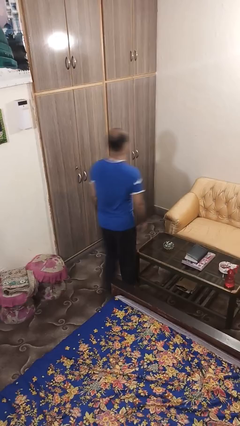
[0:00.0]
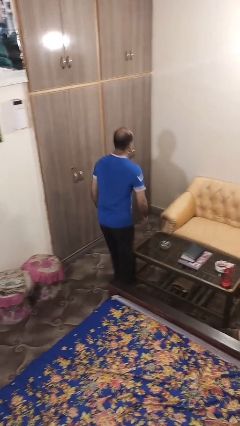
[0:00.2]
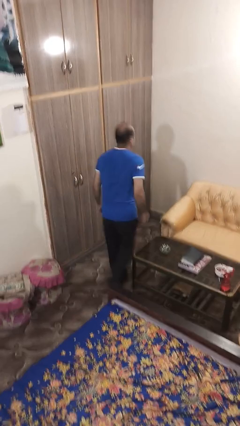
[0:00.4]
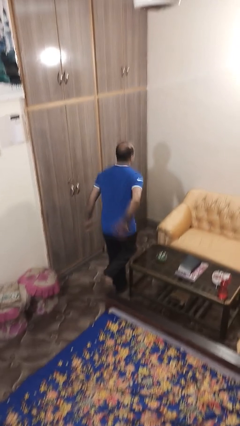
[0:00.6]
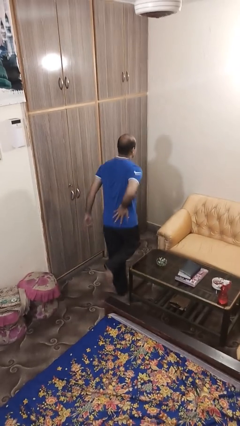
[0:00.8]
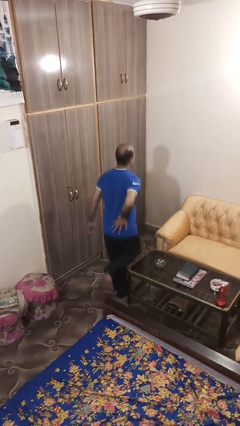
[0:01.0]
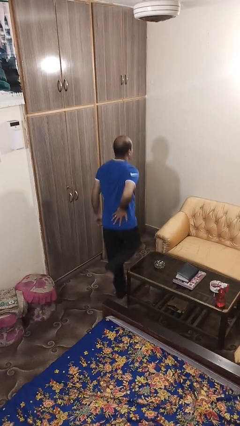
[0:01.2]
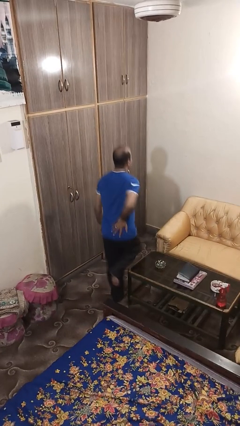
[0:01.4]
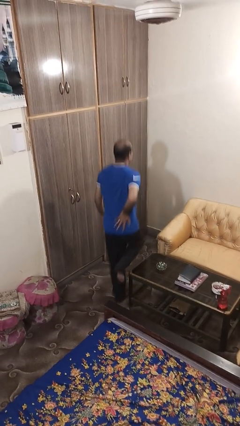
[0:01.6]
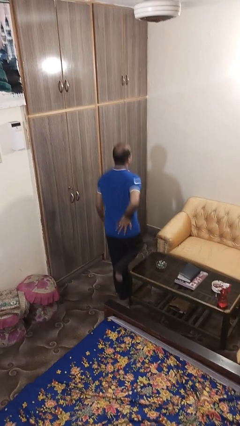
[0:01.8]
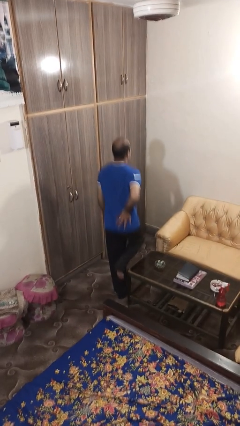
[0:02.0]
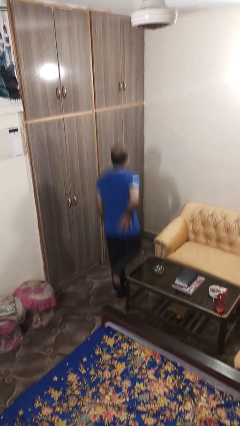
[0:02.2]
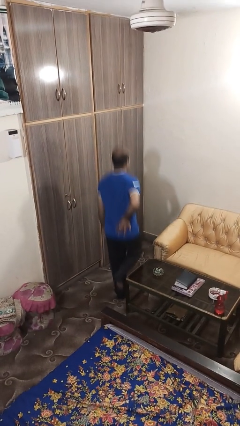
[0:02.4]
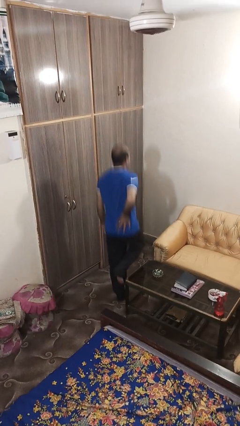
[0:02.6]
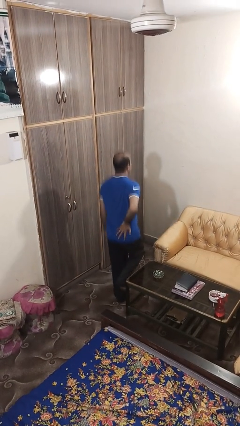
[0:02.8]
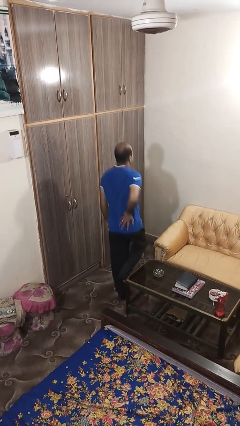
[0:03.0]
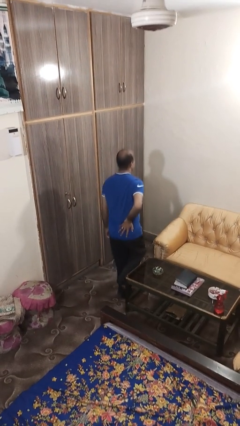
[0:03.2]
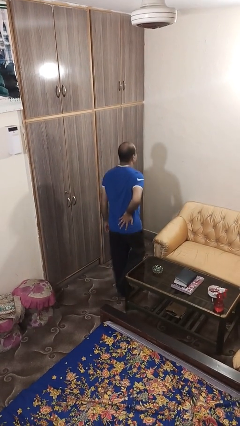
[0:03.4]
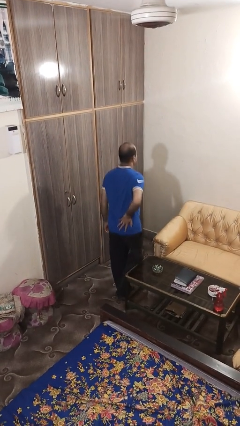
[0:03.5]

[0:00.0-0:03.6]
person bumps into table

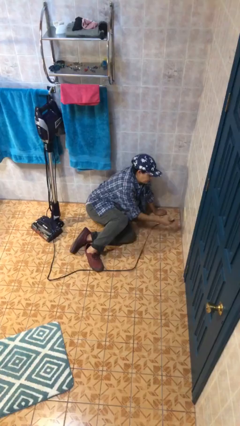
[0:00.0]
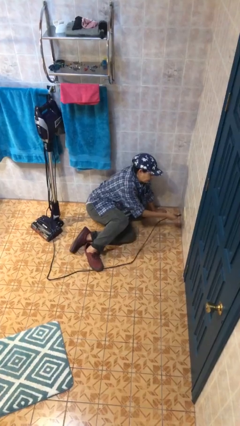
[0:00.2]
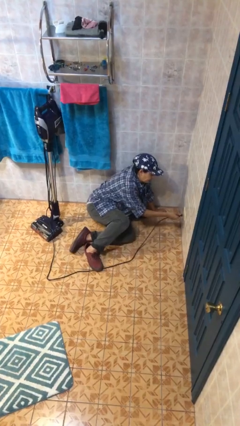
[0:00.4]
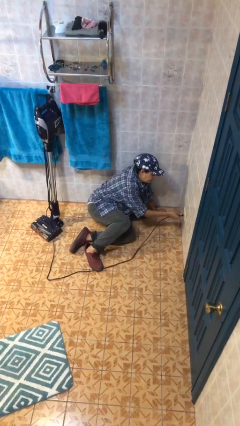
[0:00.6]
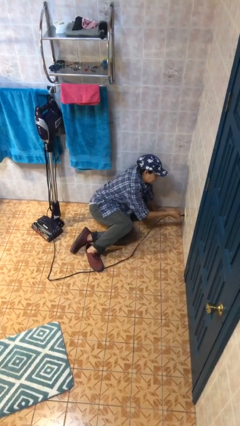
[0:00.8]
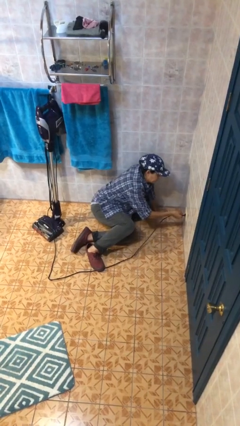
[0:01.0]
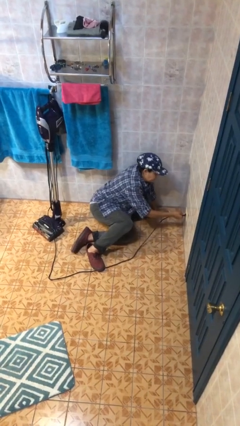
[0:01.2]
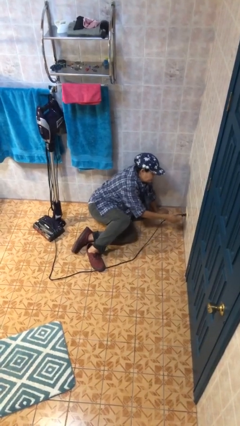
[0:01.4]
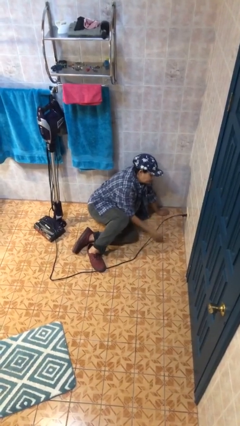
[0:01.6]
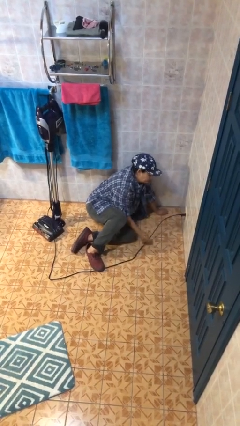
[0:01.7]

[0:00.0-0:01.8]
person plugs into electrical socket

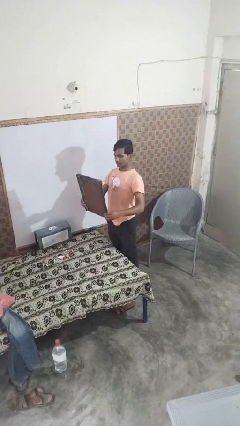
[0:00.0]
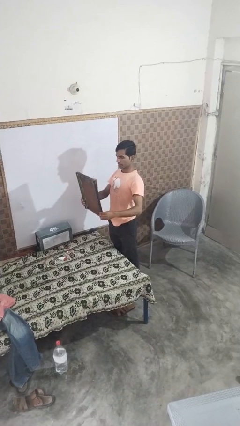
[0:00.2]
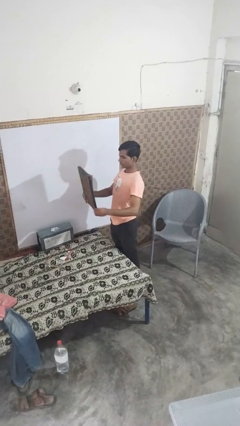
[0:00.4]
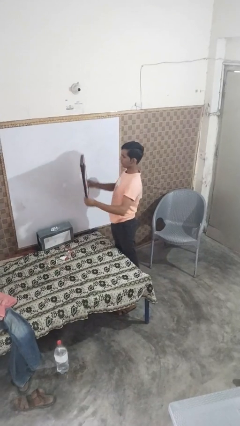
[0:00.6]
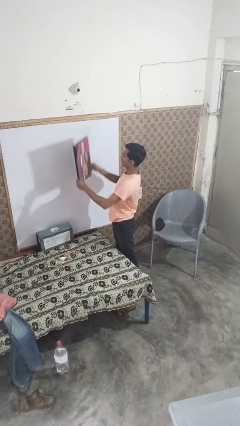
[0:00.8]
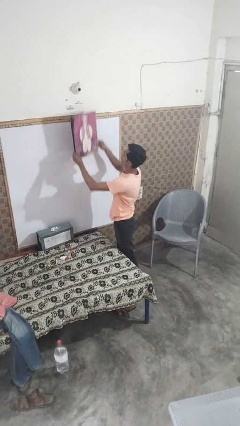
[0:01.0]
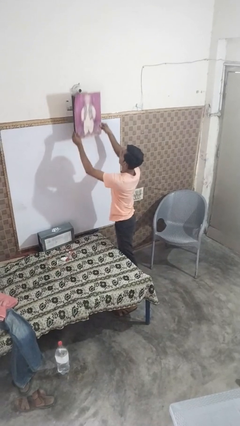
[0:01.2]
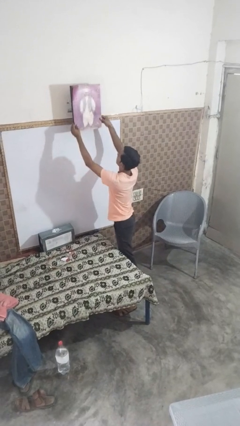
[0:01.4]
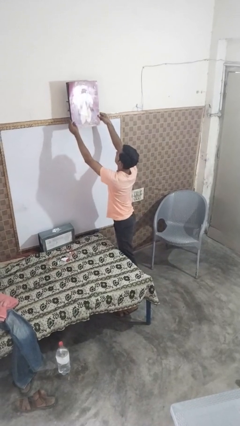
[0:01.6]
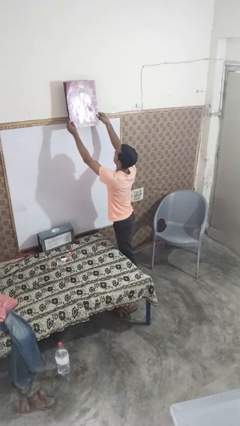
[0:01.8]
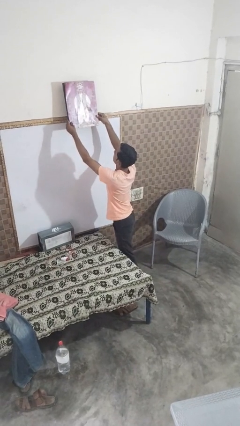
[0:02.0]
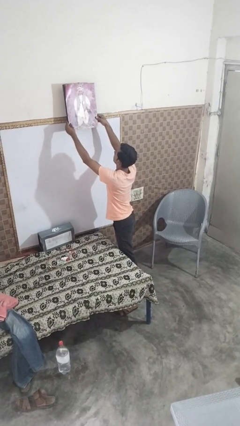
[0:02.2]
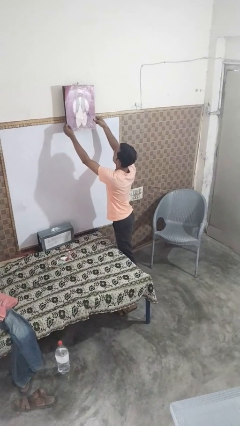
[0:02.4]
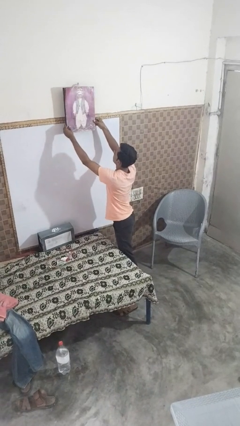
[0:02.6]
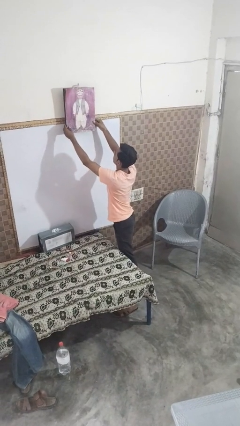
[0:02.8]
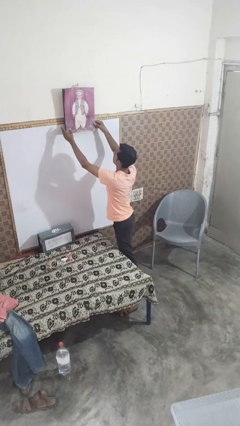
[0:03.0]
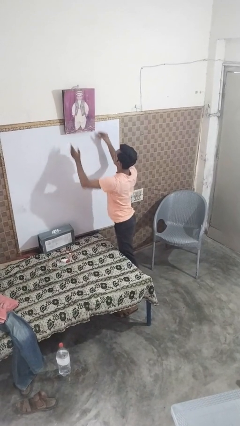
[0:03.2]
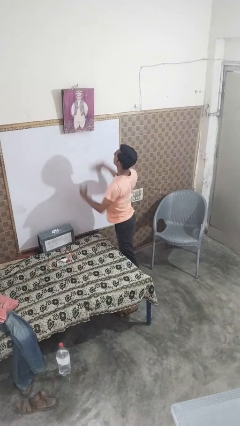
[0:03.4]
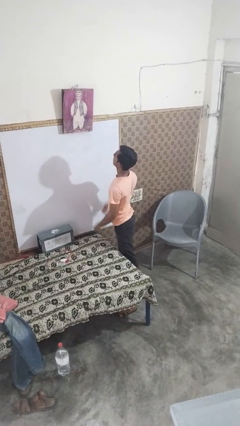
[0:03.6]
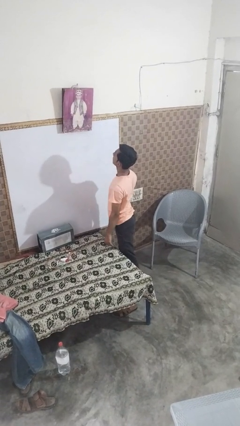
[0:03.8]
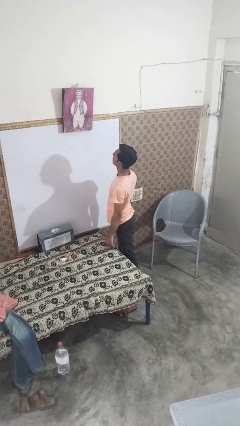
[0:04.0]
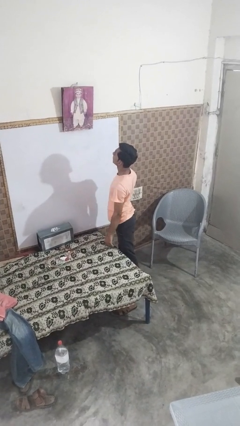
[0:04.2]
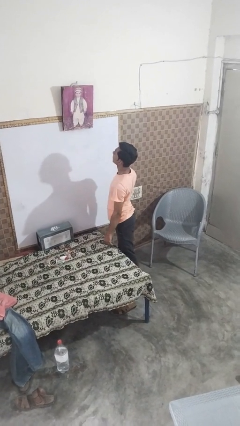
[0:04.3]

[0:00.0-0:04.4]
person puts up picture frame

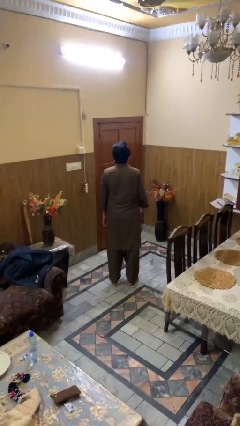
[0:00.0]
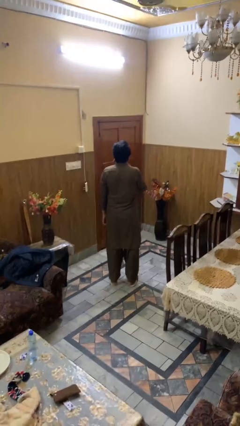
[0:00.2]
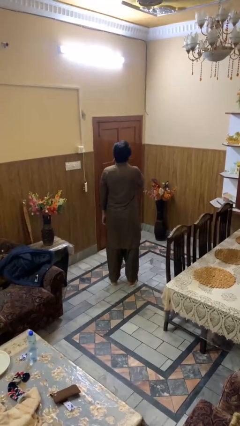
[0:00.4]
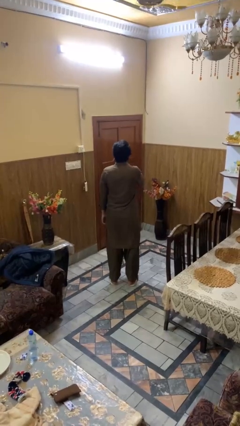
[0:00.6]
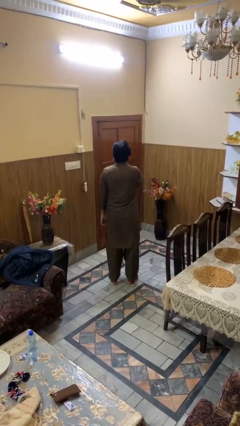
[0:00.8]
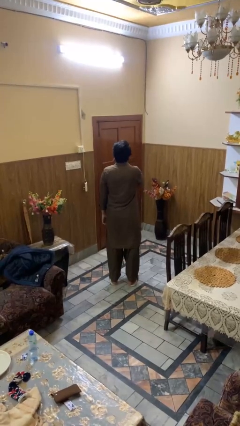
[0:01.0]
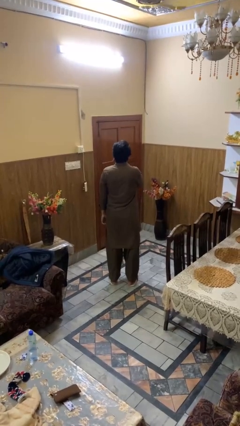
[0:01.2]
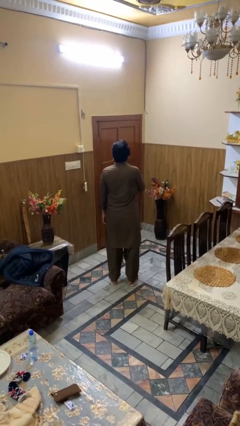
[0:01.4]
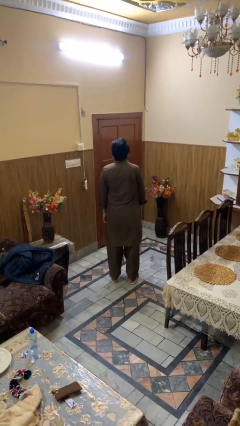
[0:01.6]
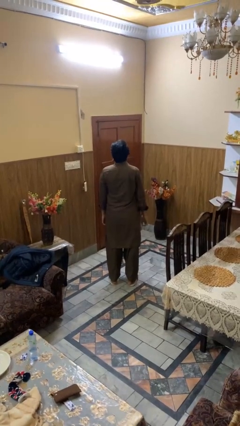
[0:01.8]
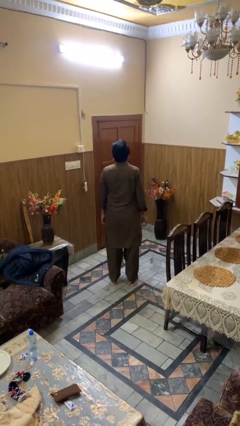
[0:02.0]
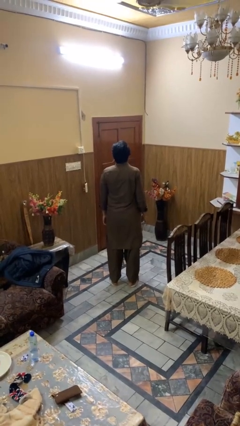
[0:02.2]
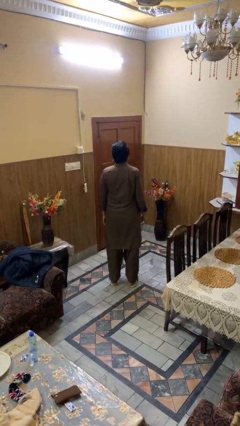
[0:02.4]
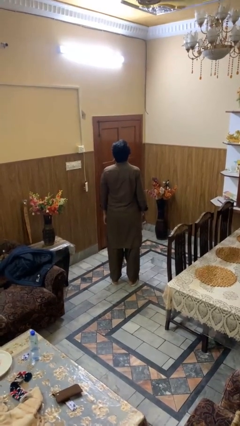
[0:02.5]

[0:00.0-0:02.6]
person drums on chest

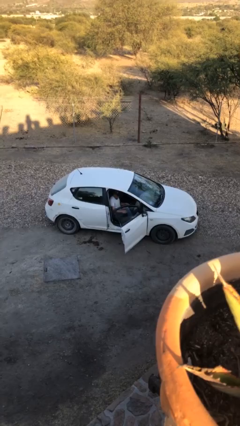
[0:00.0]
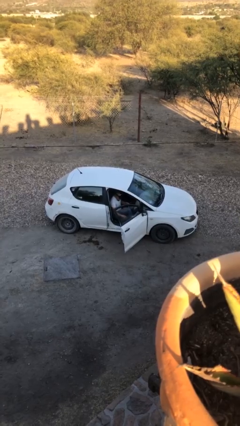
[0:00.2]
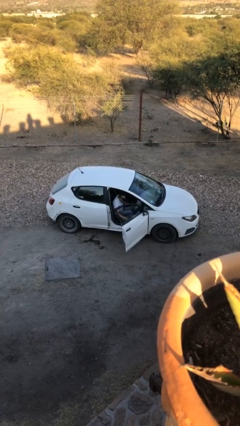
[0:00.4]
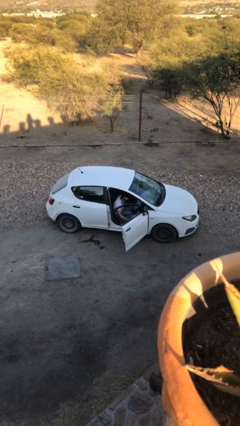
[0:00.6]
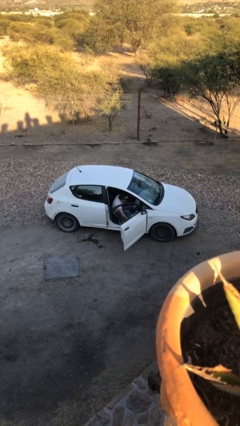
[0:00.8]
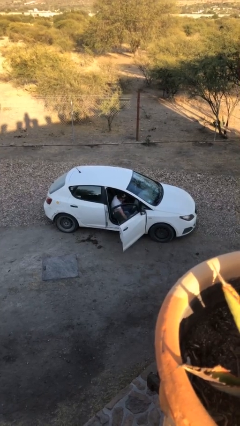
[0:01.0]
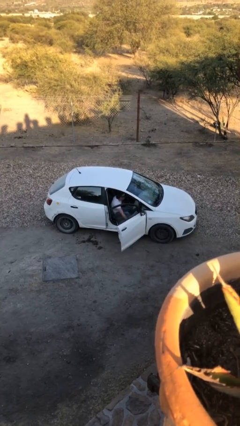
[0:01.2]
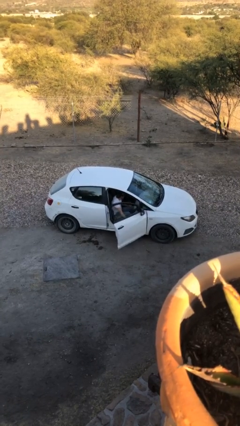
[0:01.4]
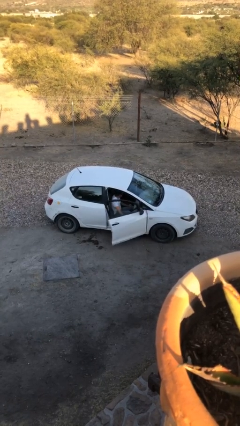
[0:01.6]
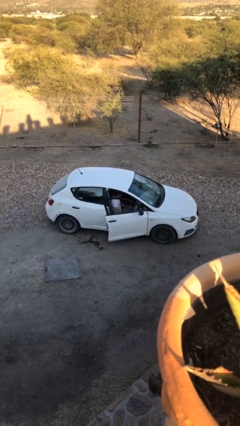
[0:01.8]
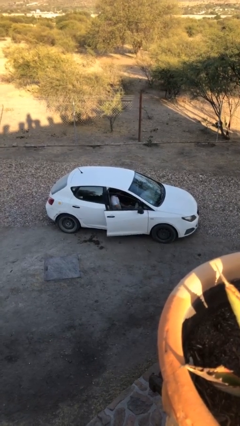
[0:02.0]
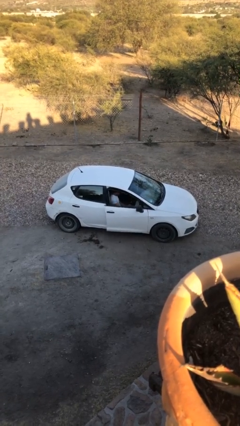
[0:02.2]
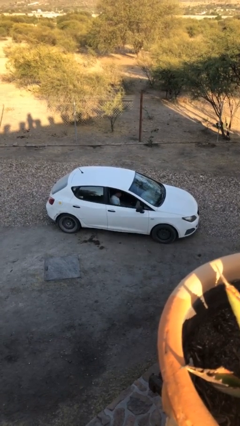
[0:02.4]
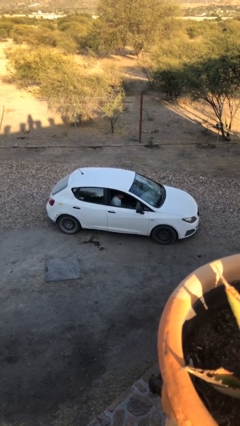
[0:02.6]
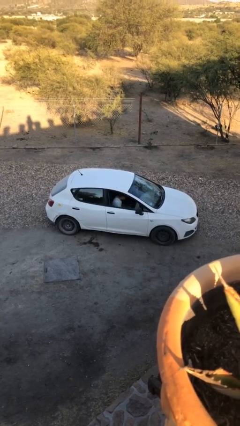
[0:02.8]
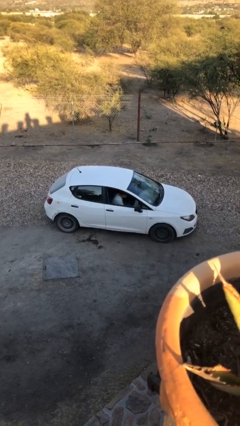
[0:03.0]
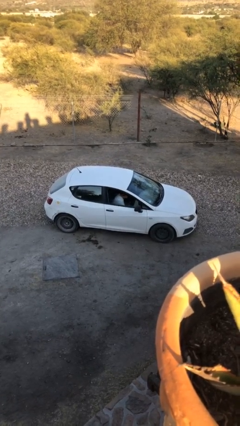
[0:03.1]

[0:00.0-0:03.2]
person closes car door

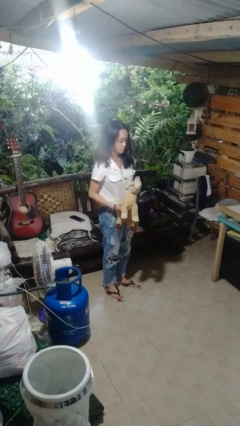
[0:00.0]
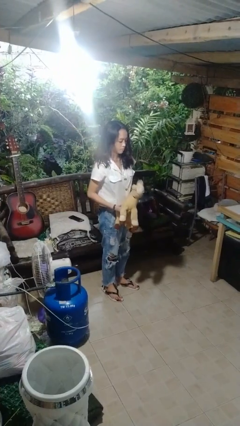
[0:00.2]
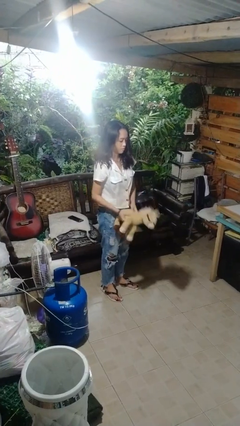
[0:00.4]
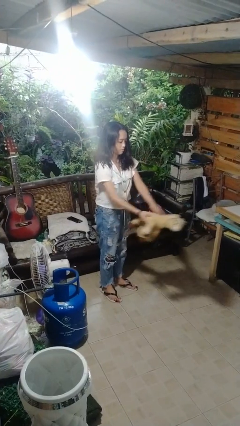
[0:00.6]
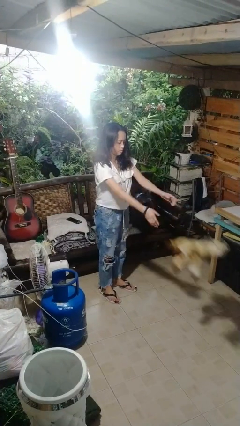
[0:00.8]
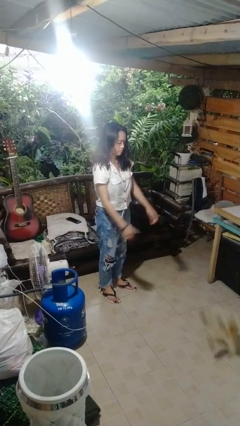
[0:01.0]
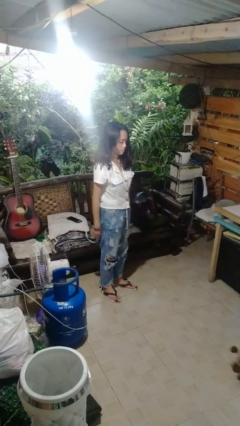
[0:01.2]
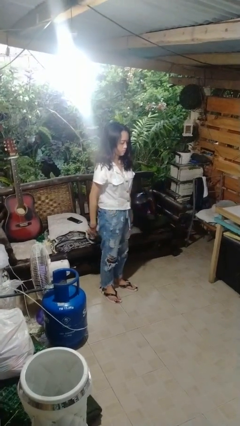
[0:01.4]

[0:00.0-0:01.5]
person throws object to ground

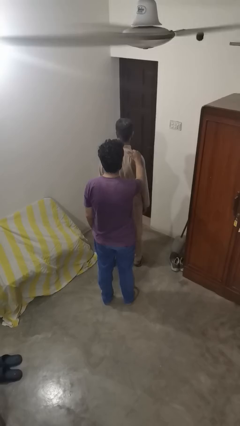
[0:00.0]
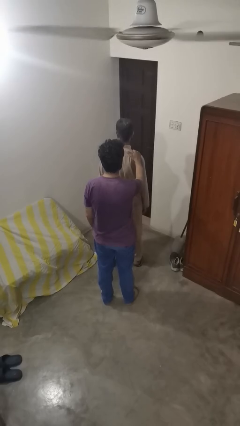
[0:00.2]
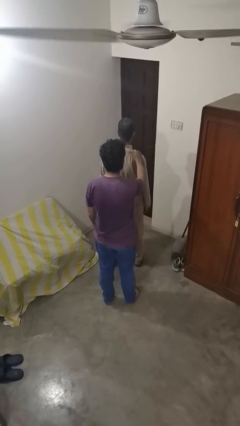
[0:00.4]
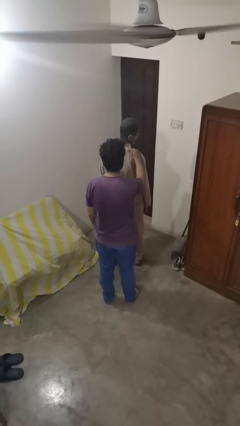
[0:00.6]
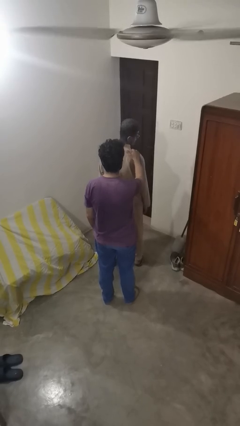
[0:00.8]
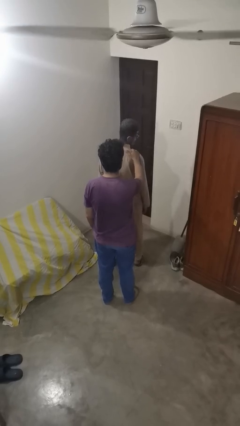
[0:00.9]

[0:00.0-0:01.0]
person grabs person by shoulder
